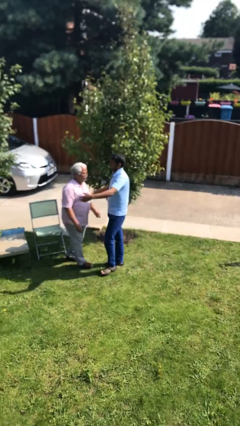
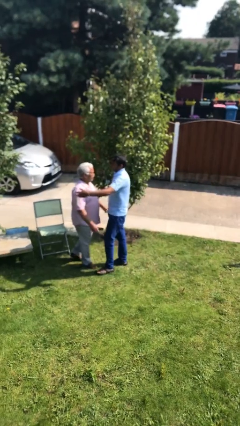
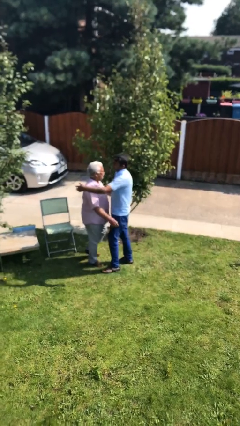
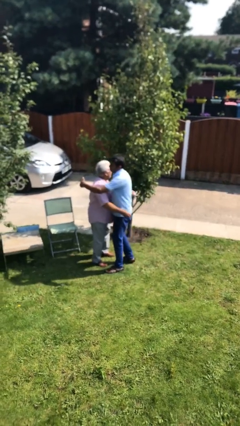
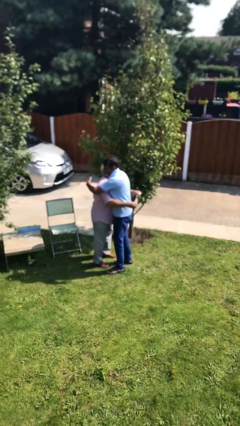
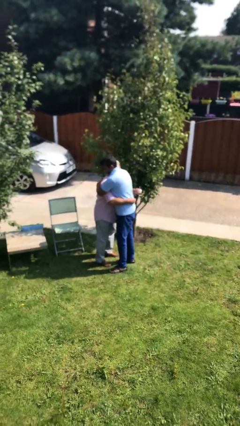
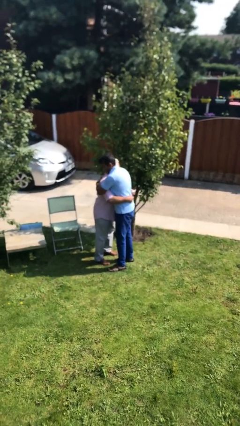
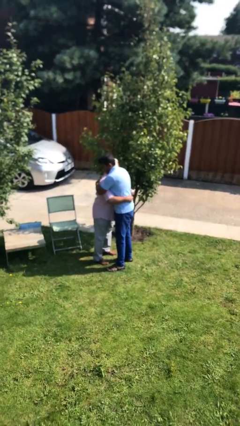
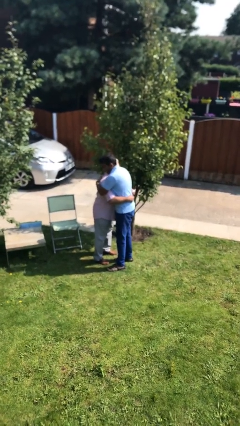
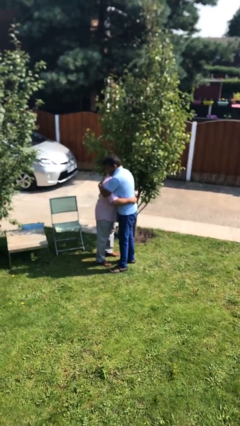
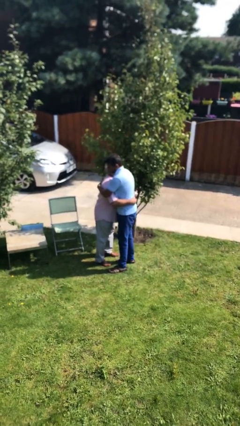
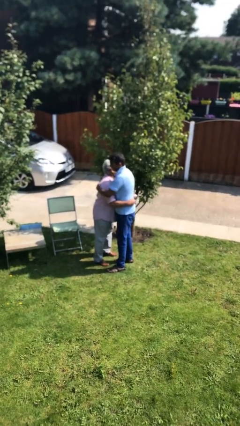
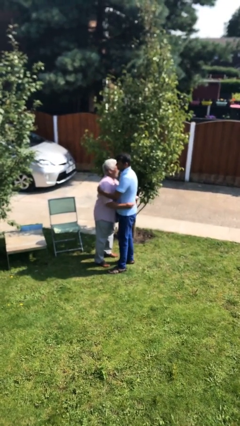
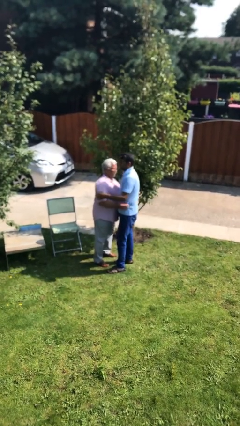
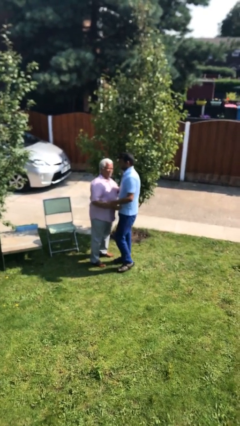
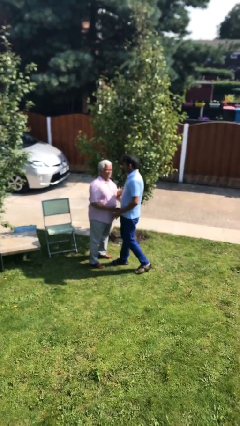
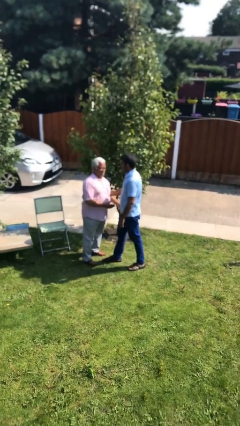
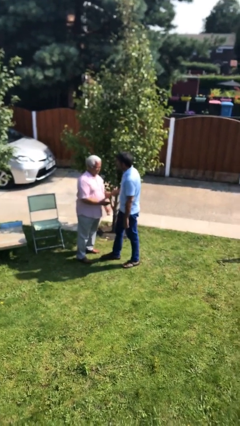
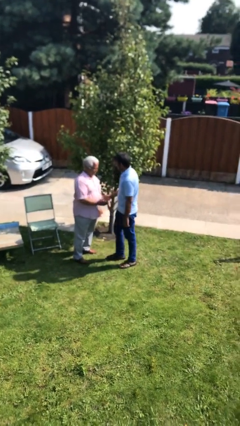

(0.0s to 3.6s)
person embraces person

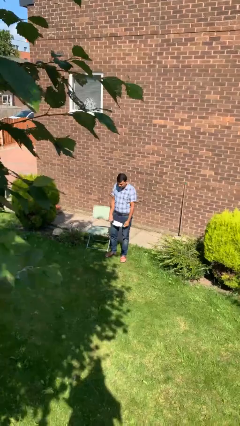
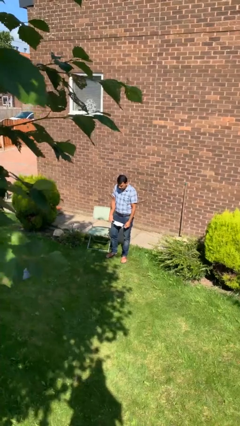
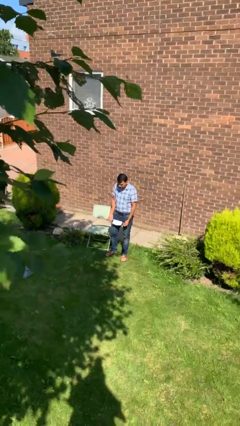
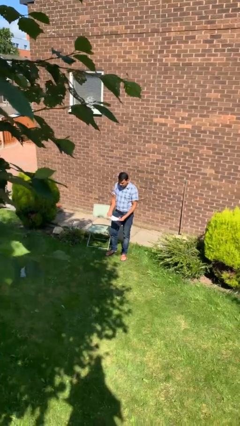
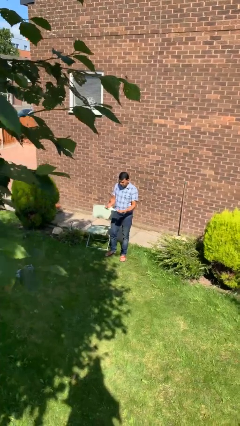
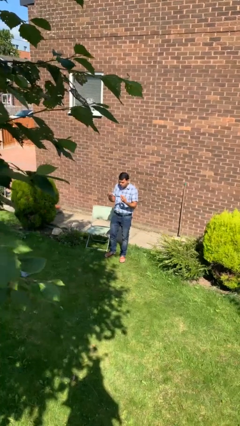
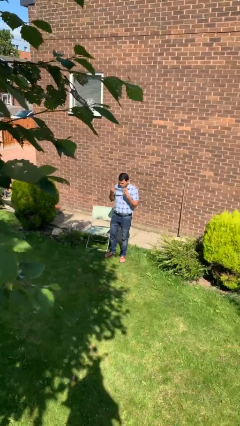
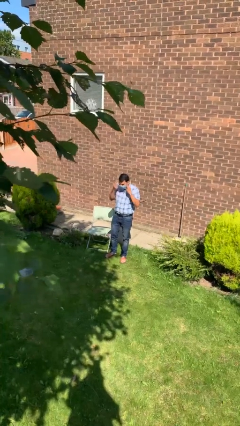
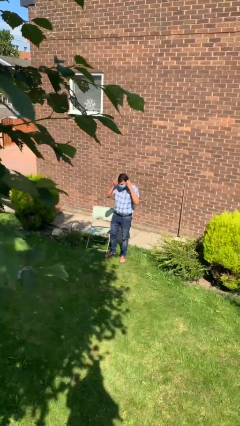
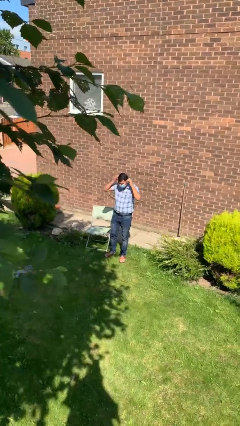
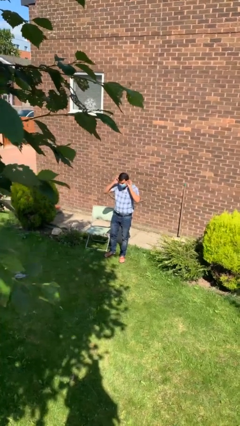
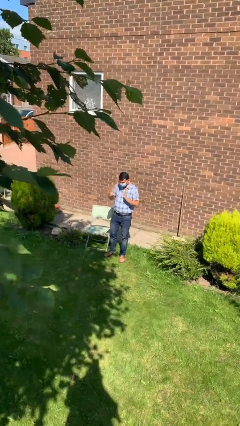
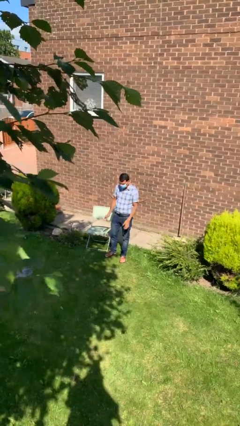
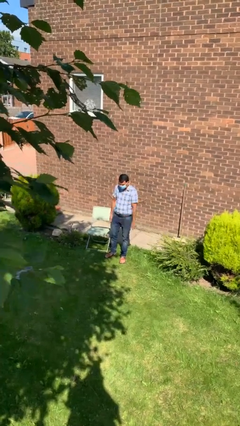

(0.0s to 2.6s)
person puts on facemask

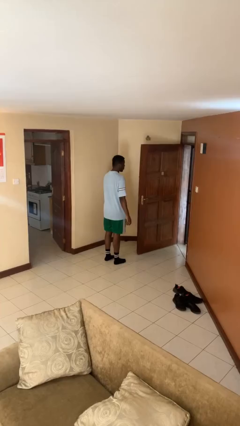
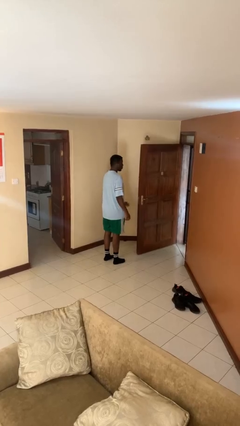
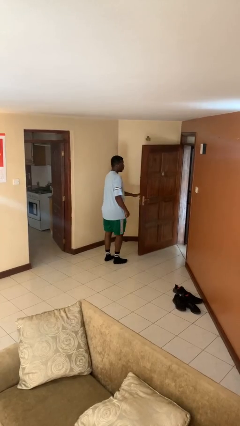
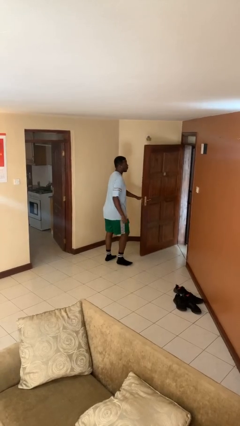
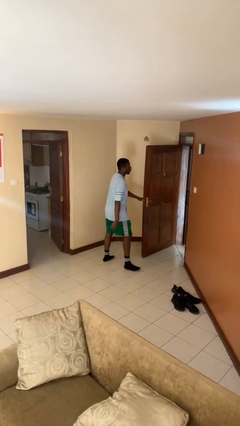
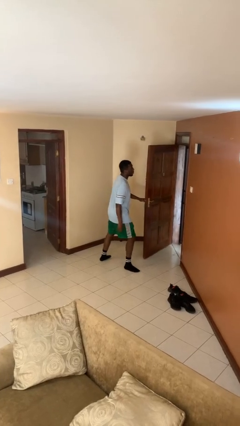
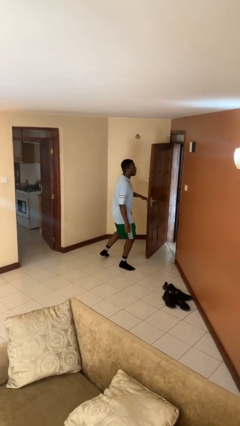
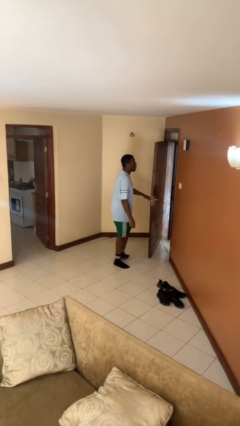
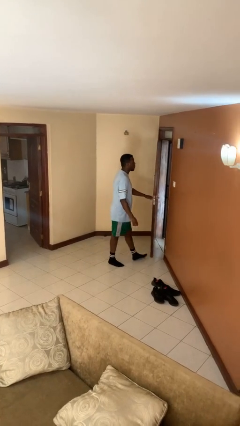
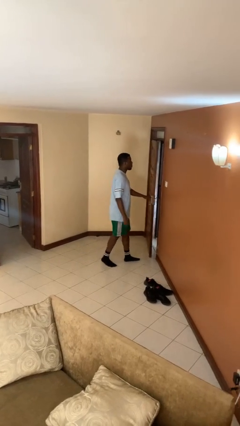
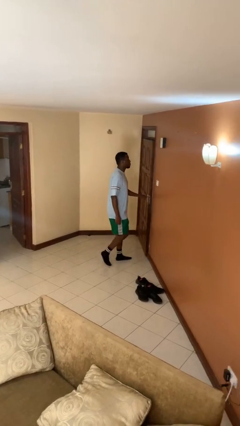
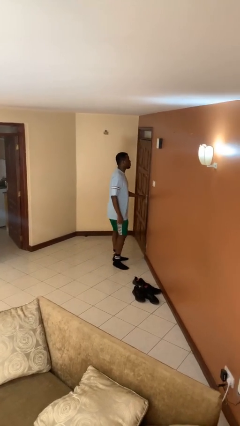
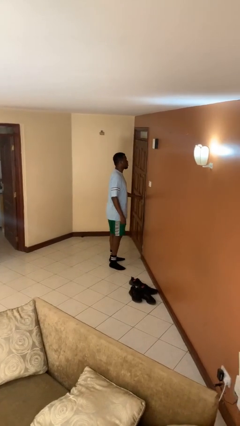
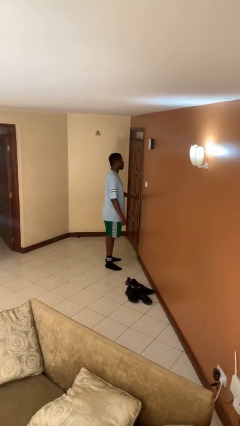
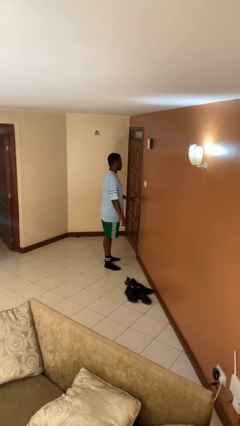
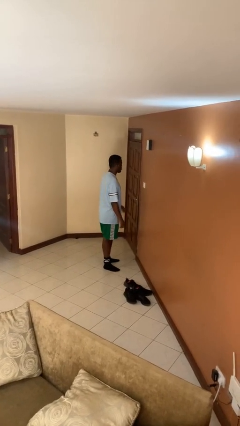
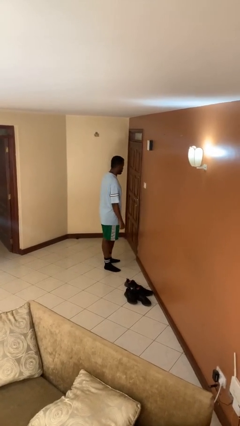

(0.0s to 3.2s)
person closes facility door

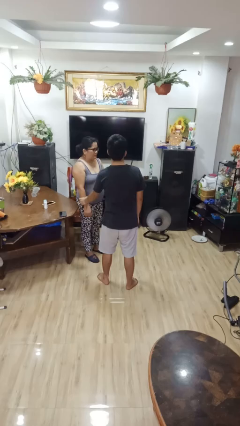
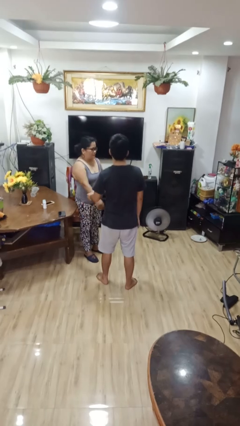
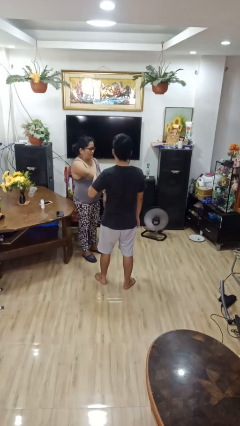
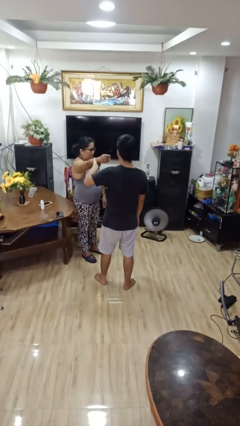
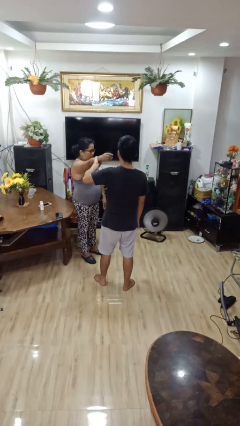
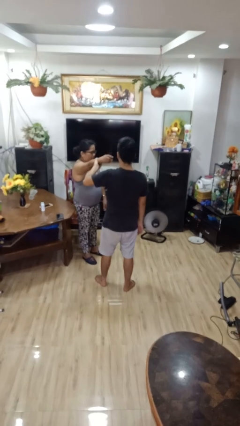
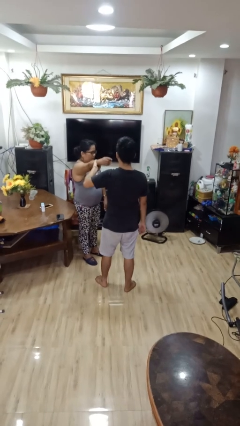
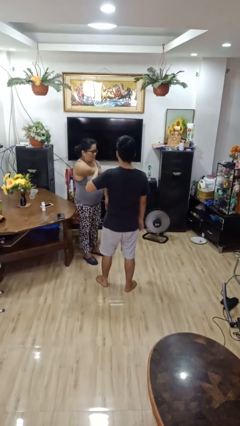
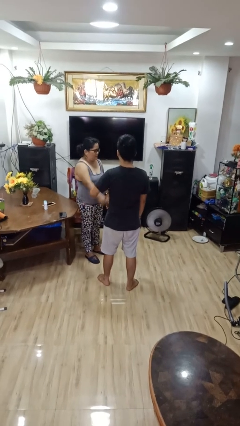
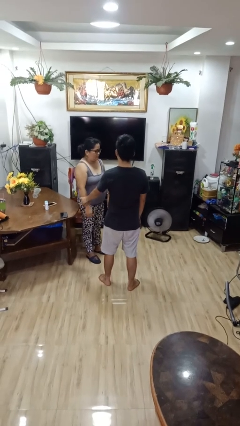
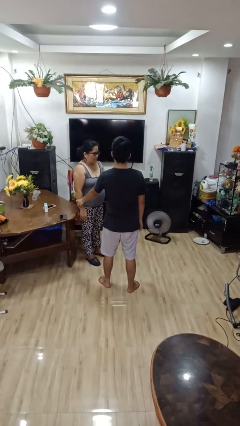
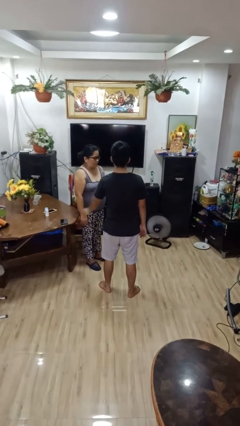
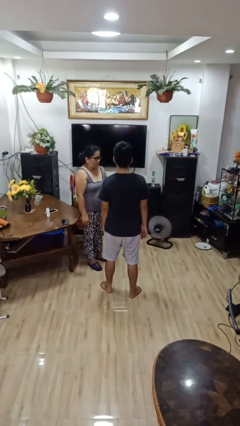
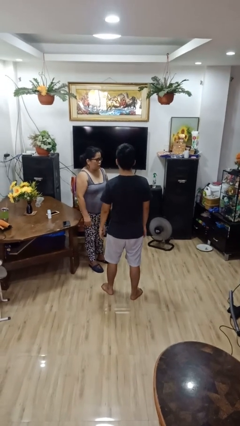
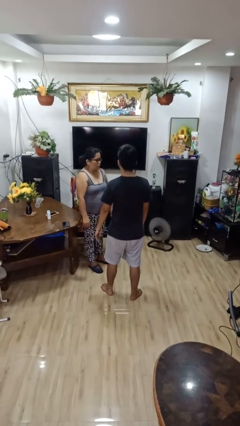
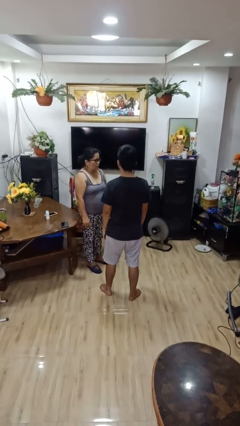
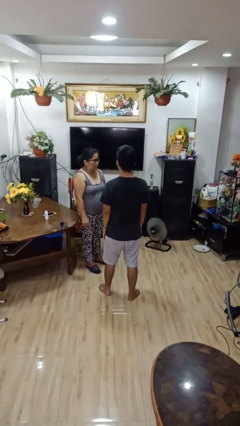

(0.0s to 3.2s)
person grabs person by forearm

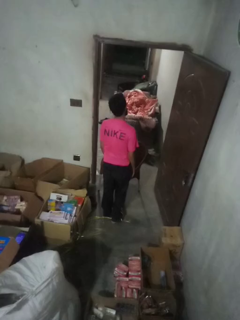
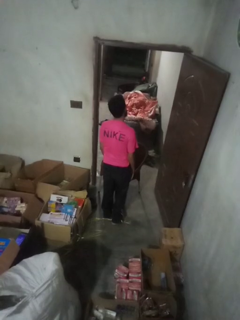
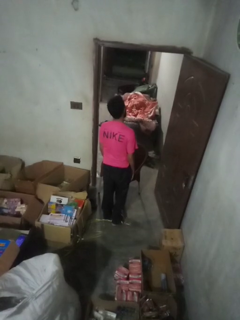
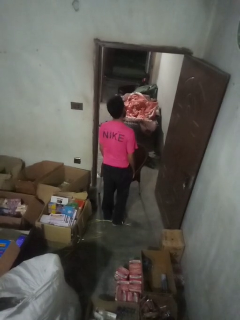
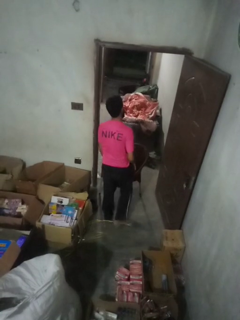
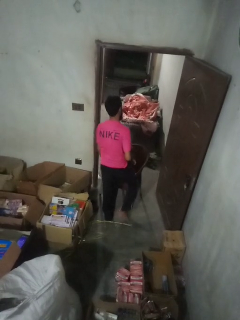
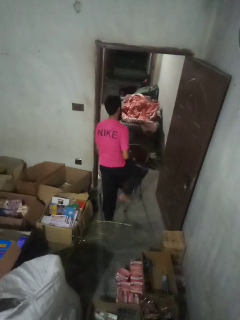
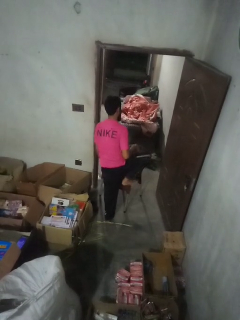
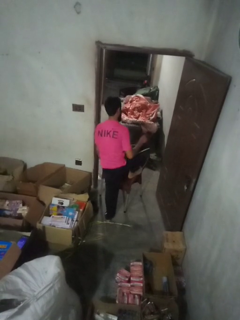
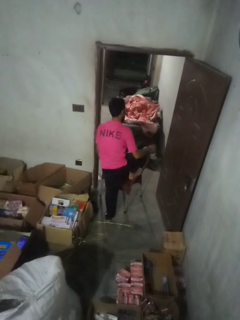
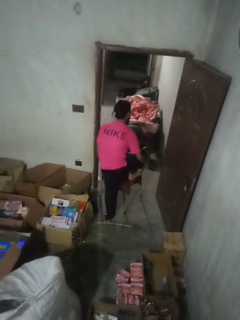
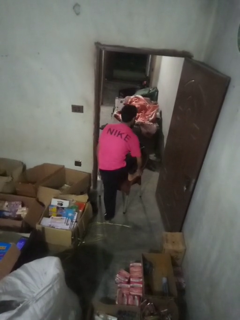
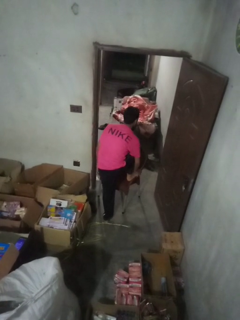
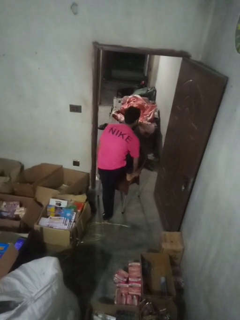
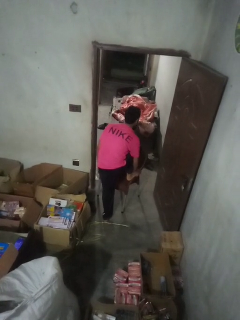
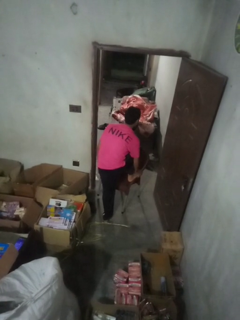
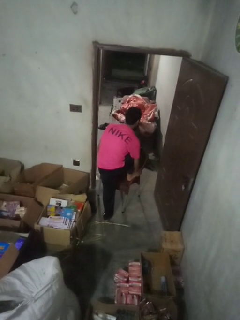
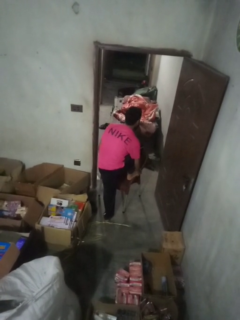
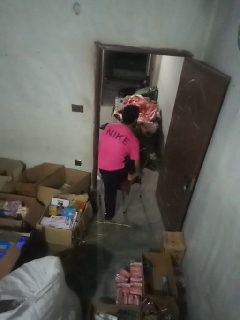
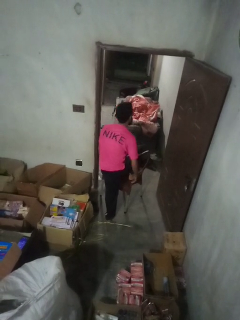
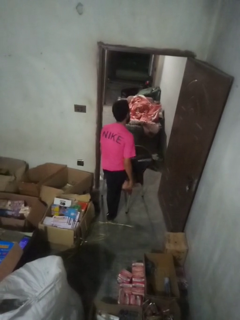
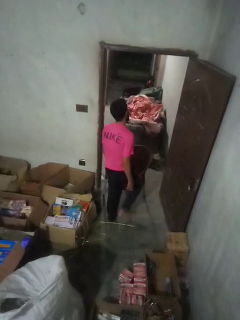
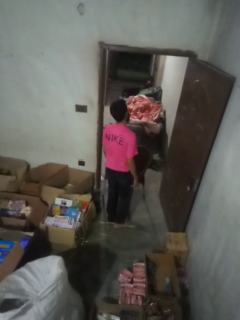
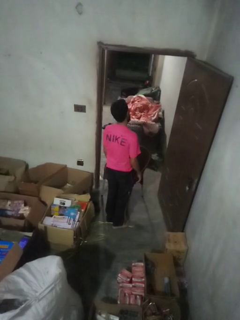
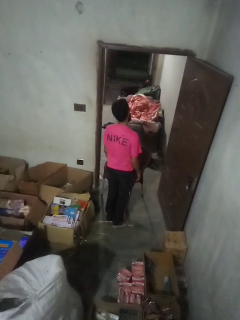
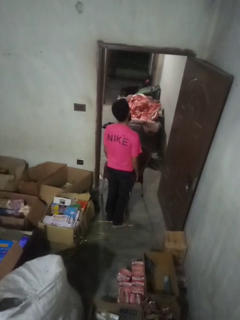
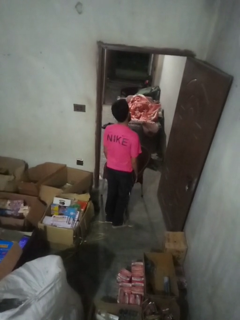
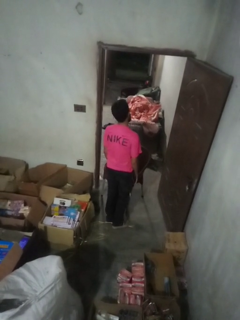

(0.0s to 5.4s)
person stubs toe

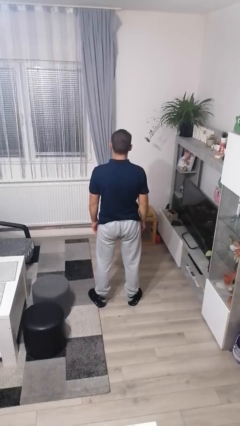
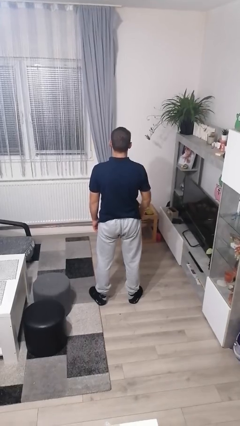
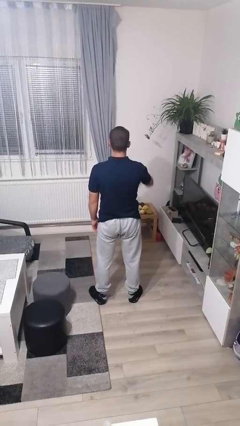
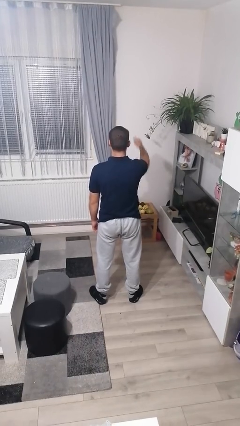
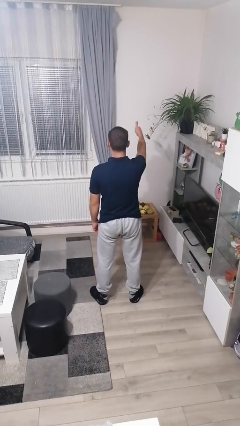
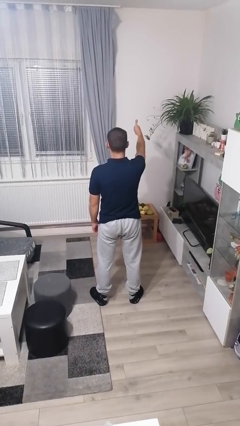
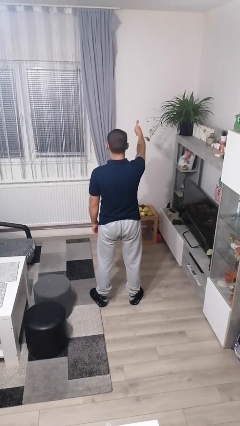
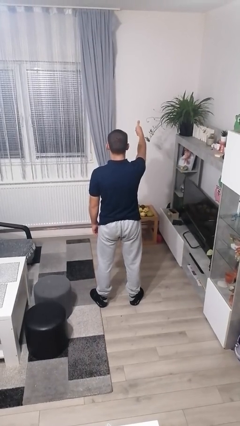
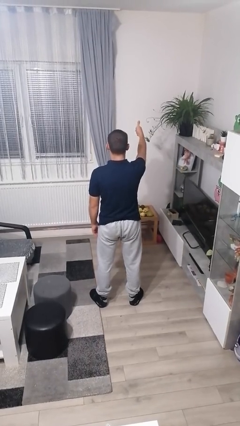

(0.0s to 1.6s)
person gestures number one
